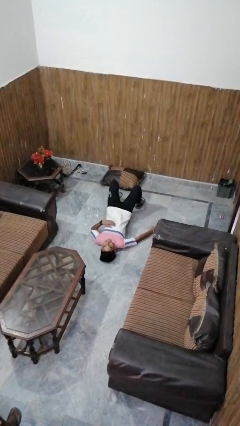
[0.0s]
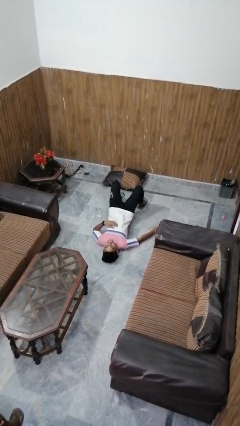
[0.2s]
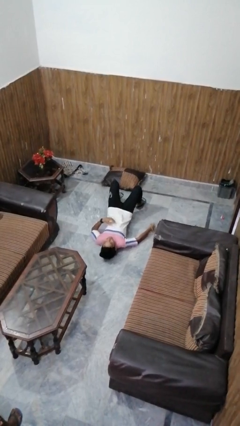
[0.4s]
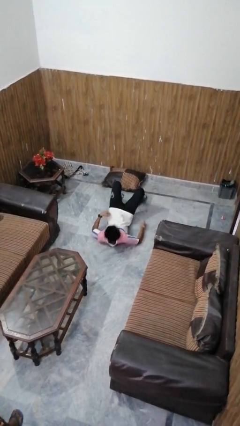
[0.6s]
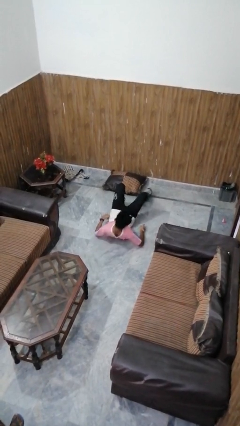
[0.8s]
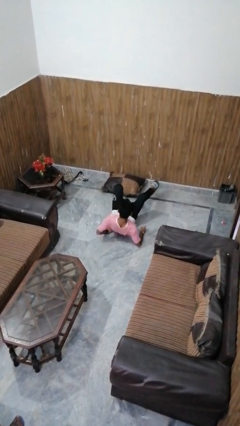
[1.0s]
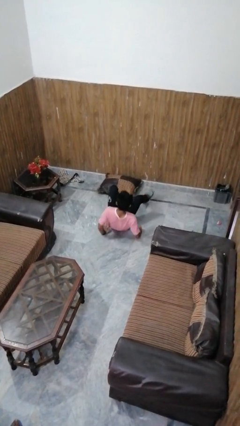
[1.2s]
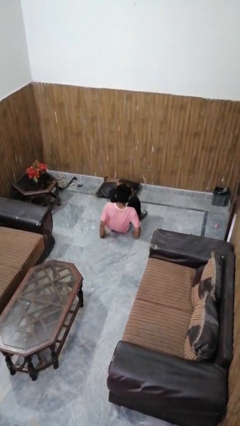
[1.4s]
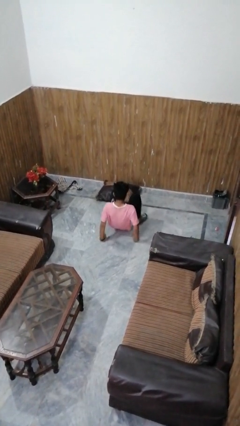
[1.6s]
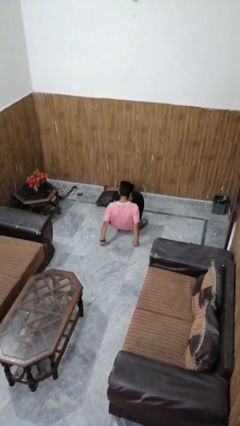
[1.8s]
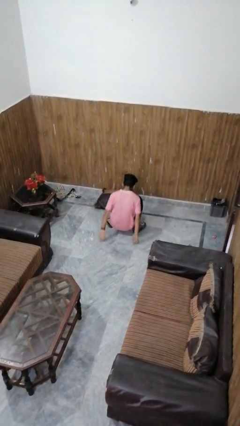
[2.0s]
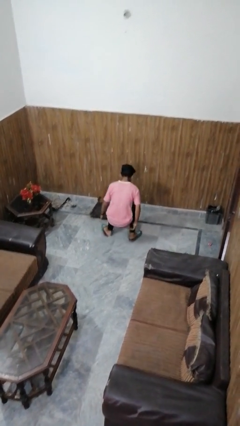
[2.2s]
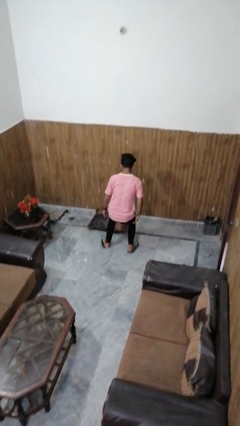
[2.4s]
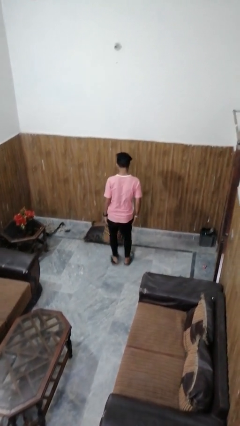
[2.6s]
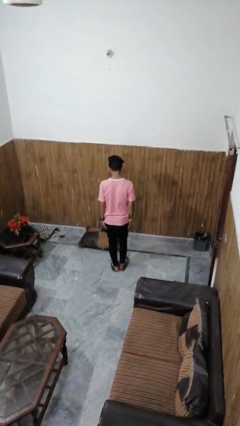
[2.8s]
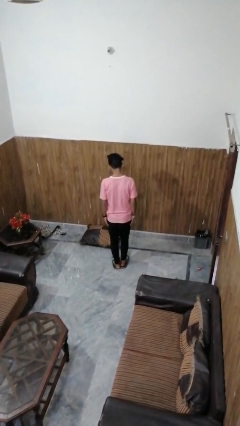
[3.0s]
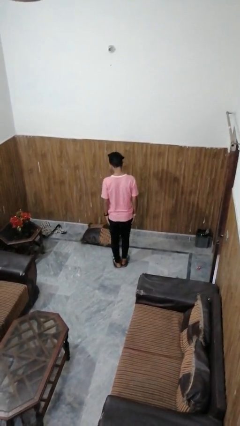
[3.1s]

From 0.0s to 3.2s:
person stands up from floor

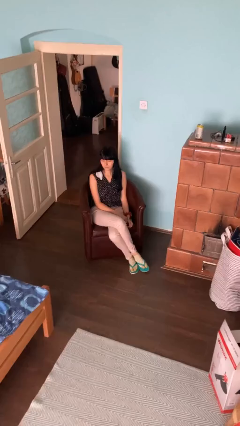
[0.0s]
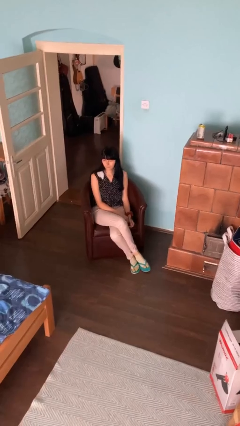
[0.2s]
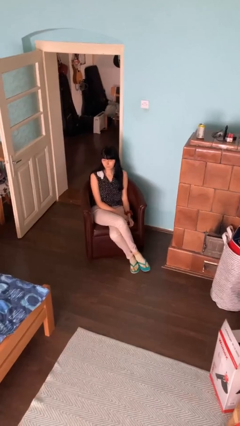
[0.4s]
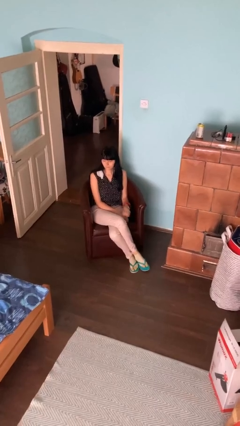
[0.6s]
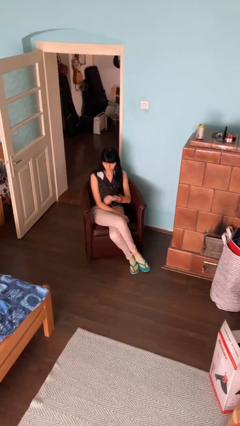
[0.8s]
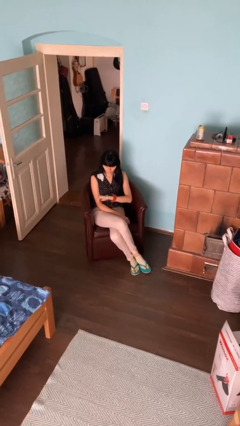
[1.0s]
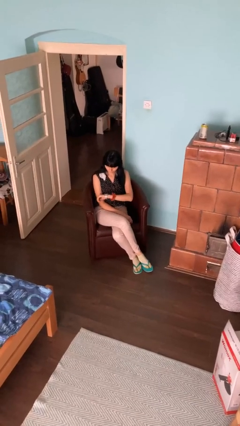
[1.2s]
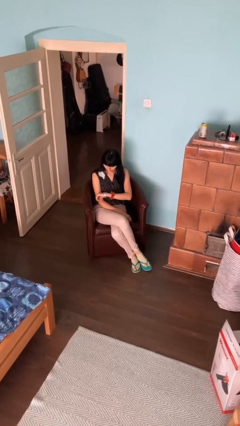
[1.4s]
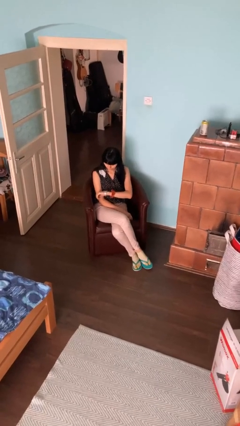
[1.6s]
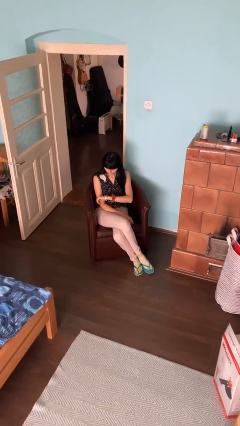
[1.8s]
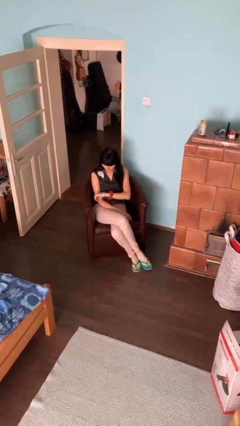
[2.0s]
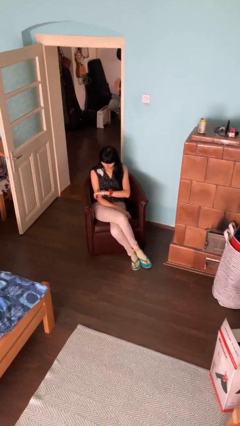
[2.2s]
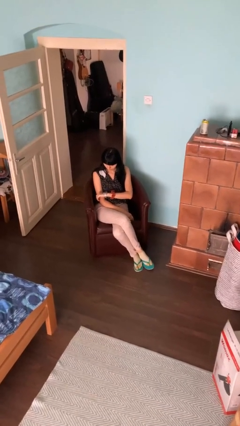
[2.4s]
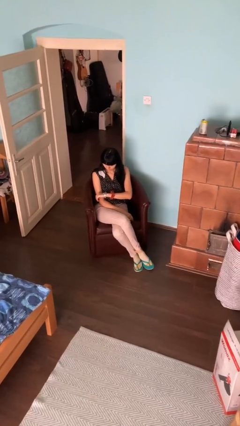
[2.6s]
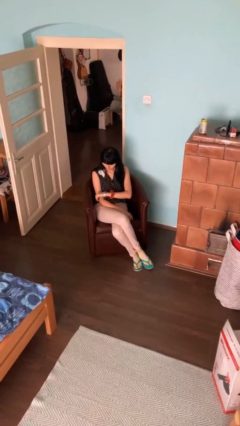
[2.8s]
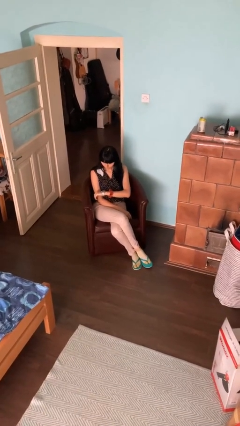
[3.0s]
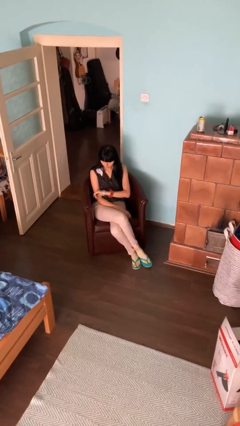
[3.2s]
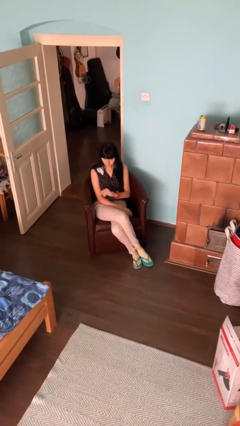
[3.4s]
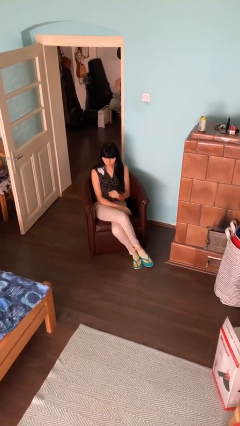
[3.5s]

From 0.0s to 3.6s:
person looks at wristwatch

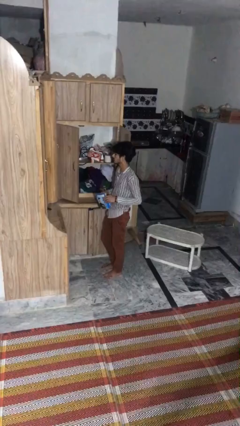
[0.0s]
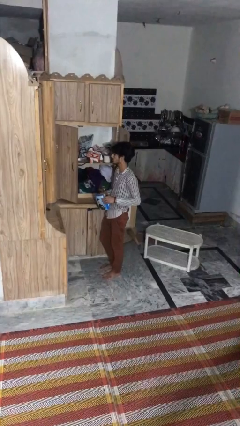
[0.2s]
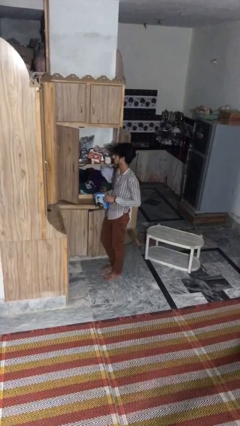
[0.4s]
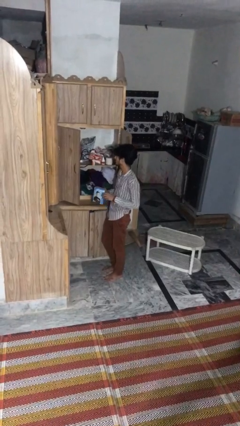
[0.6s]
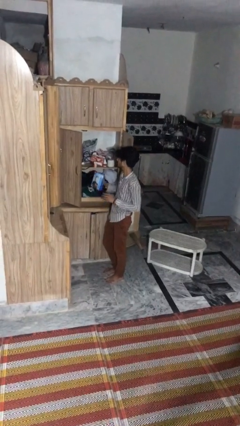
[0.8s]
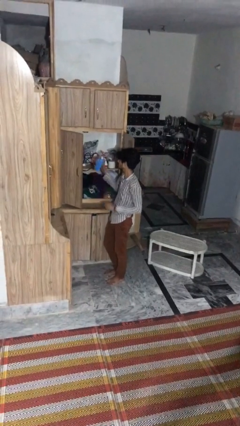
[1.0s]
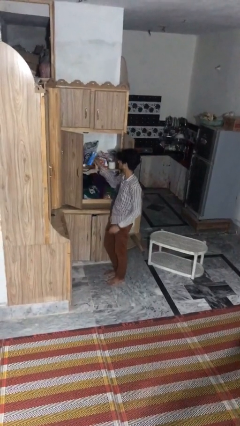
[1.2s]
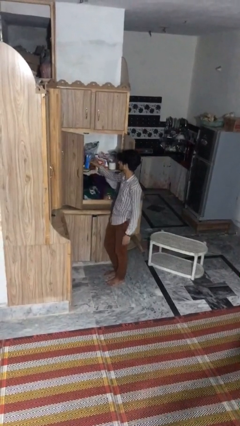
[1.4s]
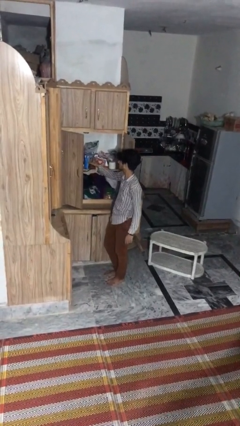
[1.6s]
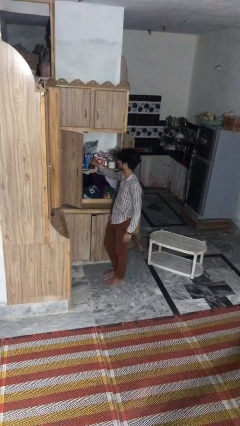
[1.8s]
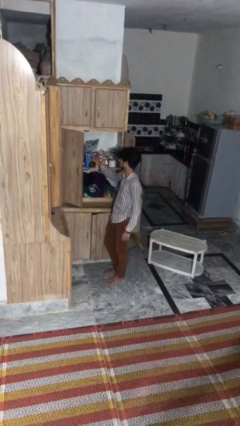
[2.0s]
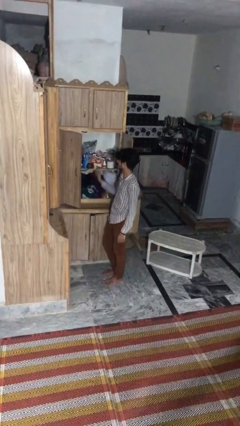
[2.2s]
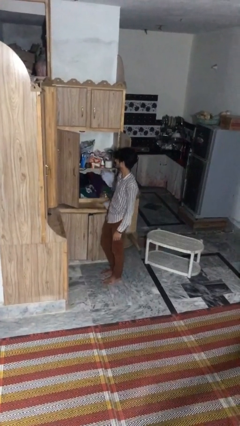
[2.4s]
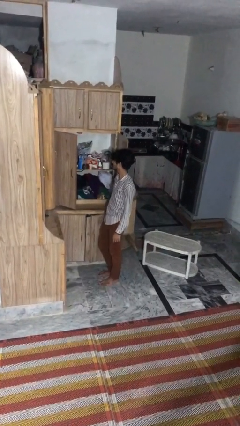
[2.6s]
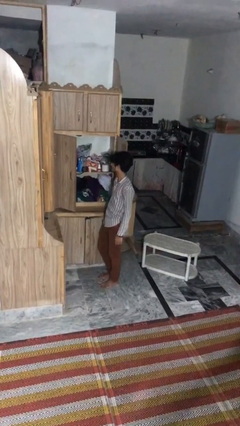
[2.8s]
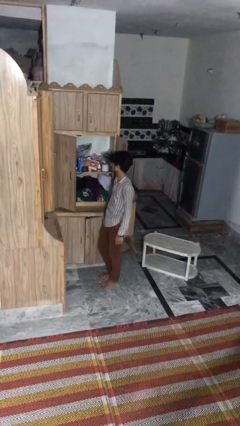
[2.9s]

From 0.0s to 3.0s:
person puts down object into cabinet

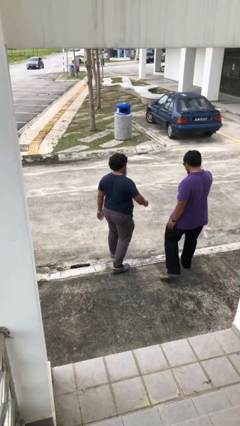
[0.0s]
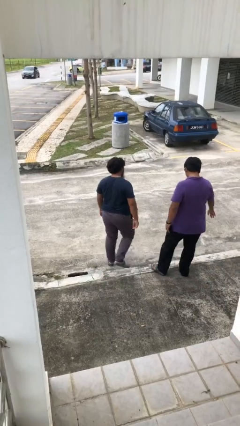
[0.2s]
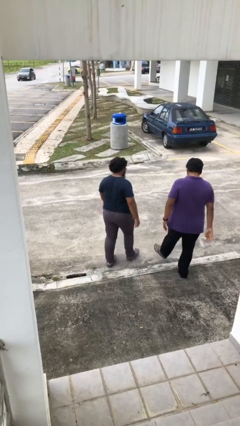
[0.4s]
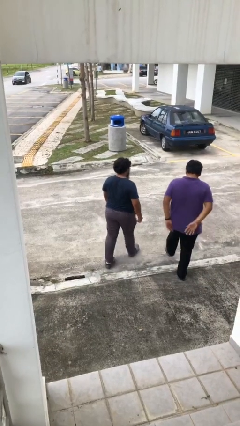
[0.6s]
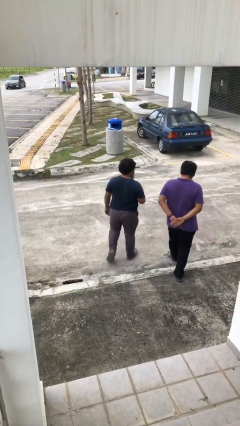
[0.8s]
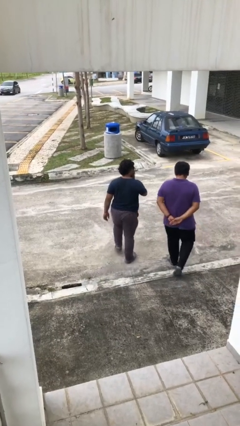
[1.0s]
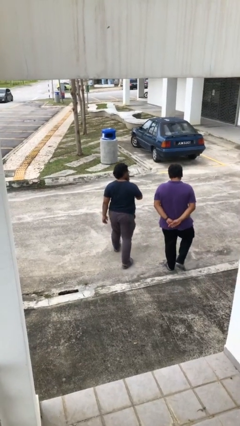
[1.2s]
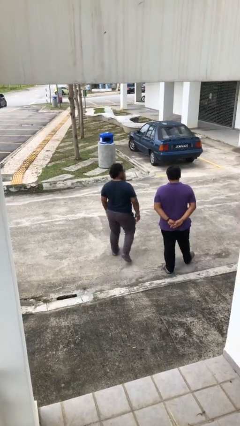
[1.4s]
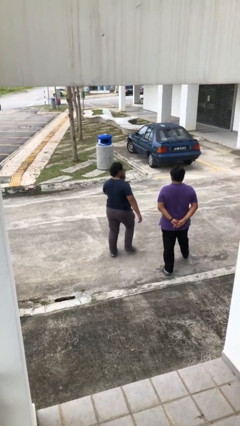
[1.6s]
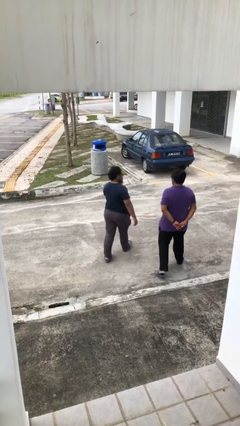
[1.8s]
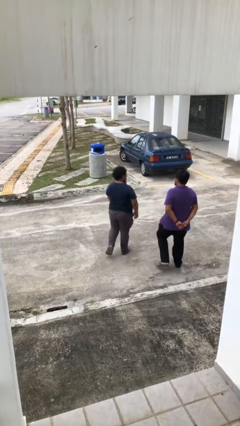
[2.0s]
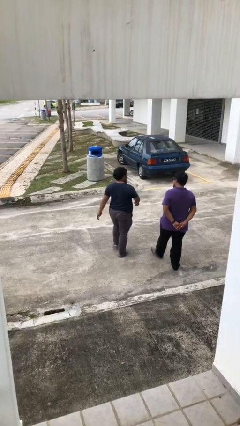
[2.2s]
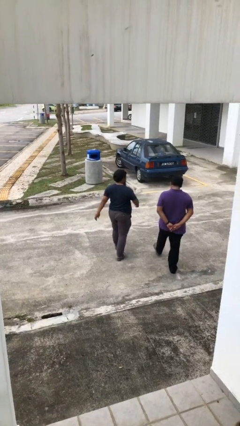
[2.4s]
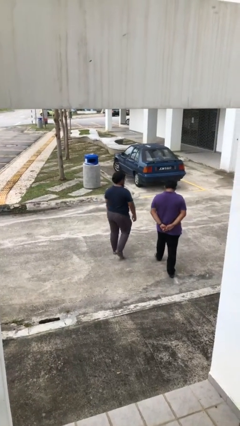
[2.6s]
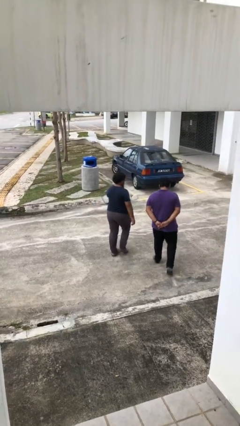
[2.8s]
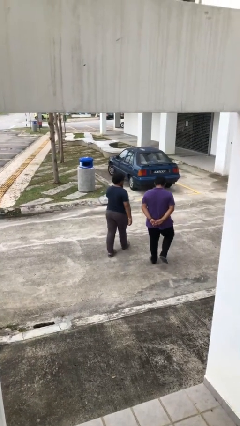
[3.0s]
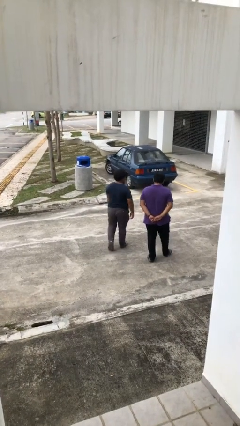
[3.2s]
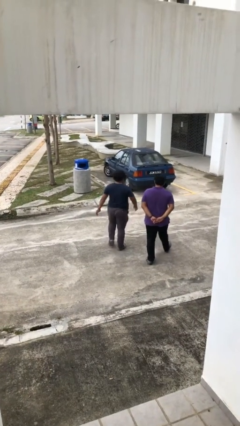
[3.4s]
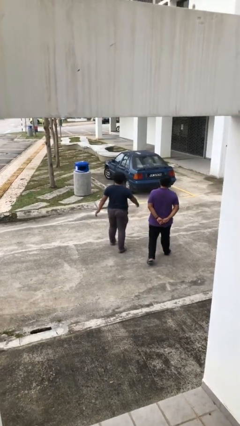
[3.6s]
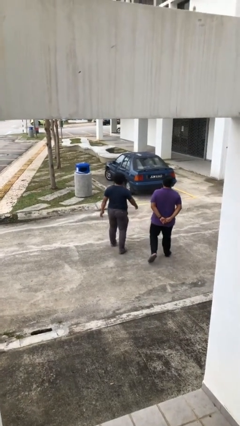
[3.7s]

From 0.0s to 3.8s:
person talks to person

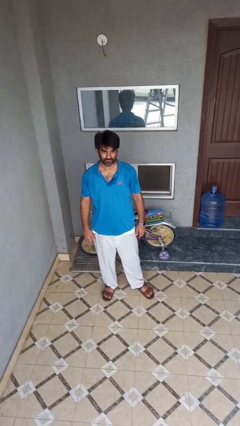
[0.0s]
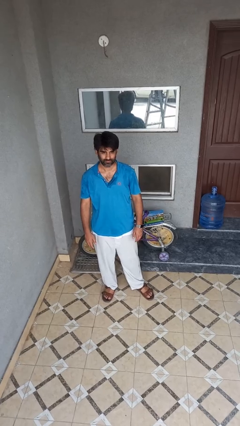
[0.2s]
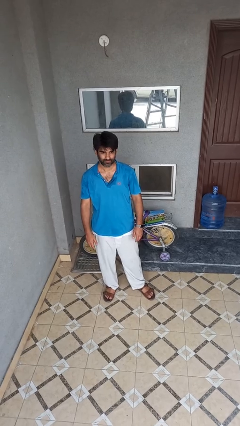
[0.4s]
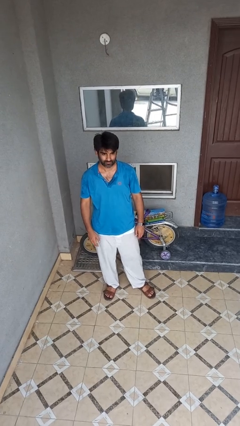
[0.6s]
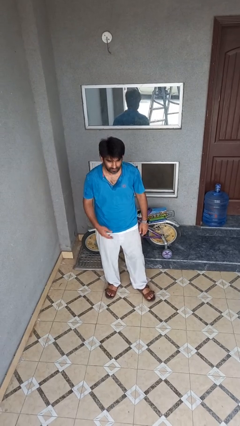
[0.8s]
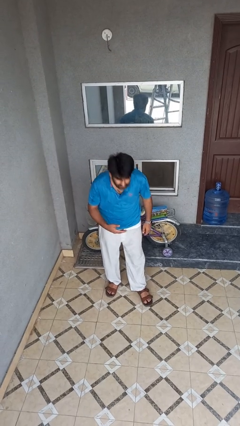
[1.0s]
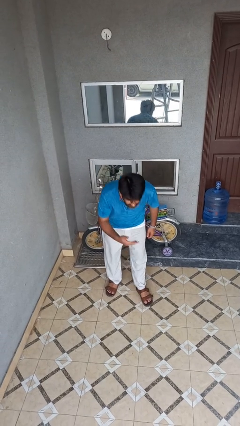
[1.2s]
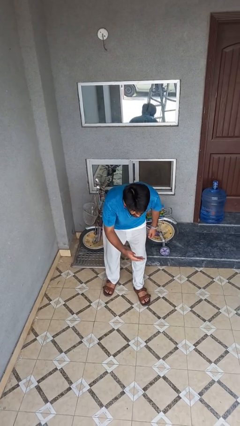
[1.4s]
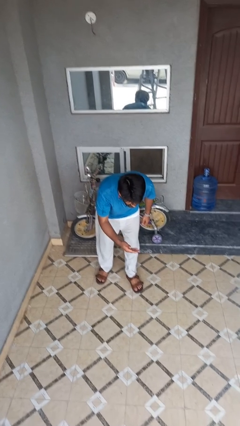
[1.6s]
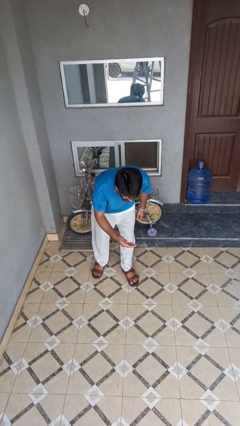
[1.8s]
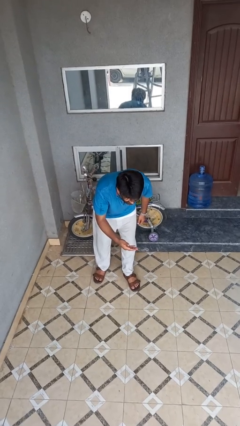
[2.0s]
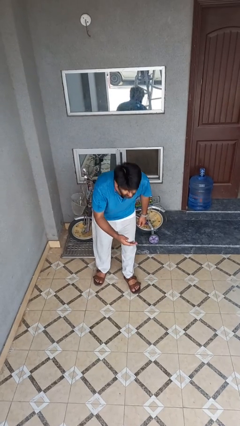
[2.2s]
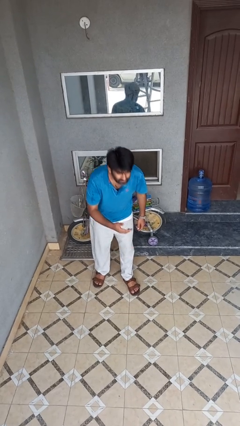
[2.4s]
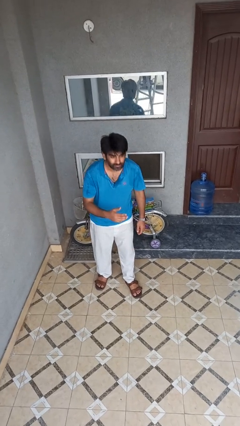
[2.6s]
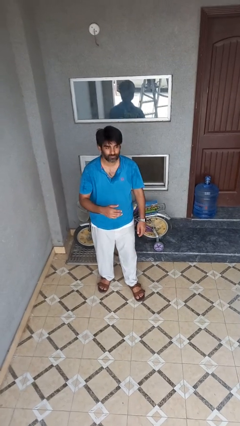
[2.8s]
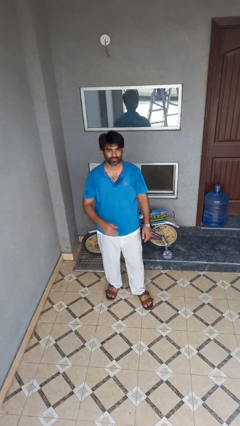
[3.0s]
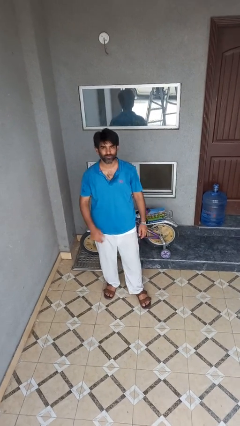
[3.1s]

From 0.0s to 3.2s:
person bows

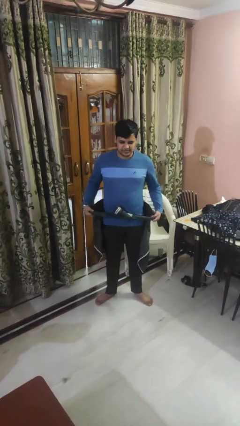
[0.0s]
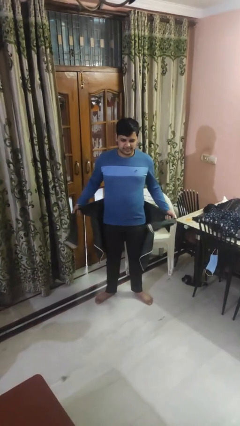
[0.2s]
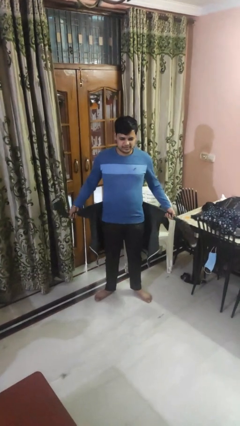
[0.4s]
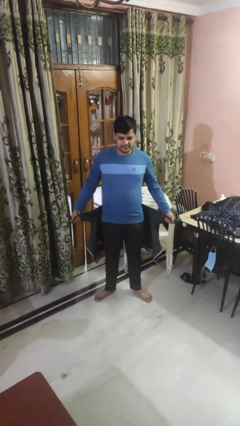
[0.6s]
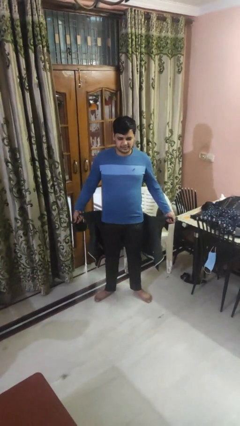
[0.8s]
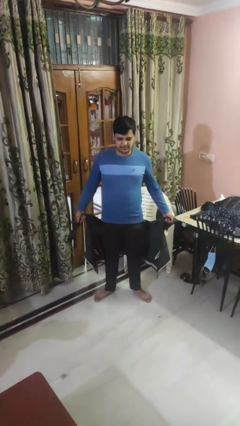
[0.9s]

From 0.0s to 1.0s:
person unties jacket around waist
